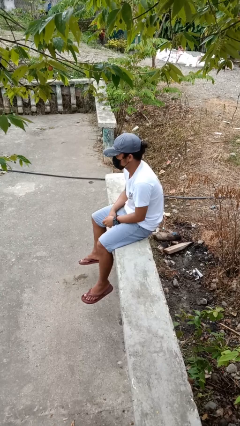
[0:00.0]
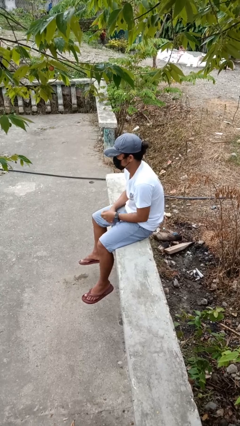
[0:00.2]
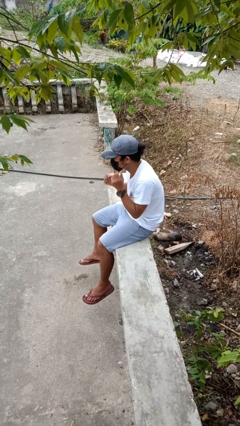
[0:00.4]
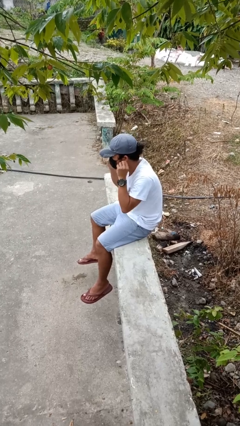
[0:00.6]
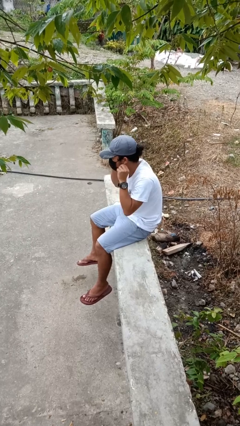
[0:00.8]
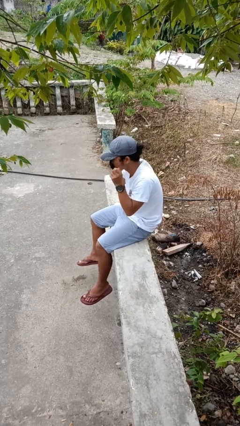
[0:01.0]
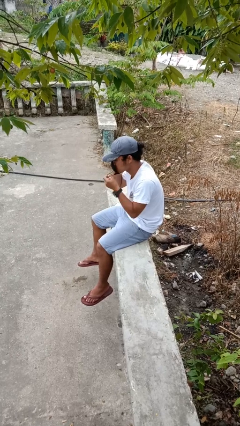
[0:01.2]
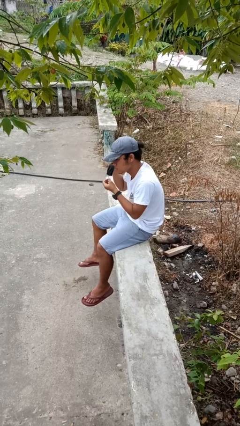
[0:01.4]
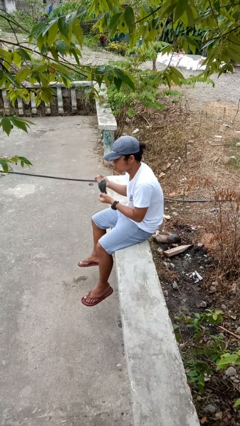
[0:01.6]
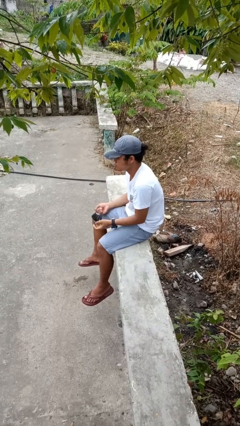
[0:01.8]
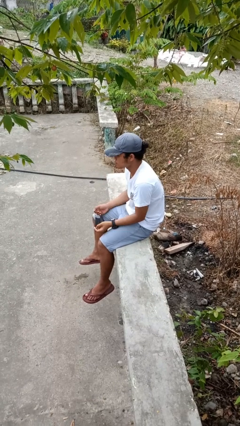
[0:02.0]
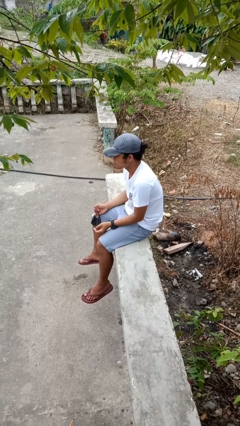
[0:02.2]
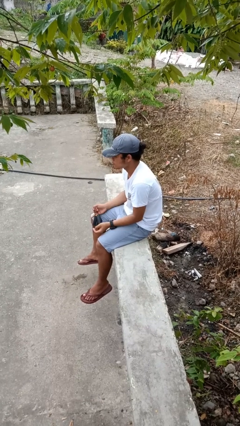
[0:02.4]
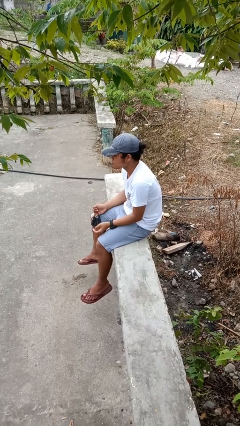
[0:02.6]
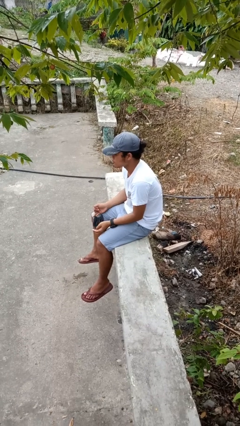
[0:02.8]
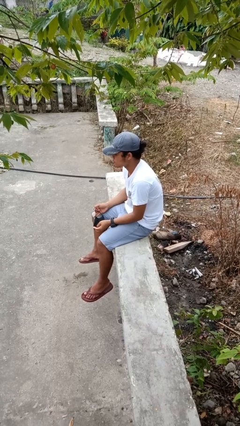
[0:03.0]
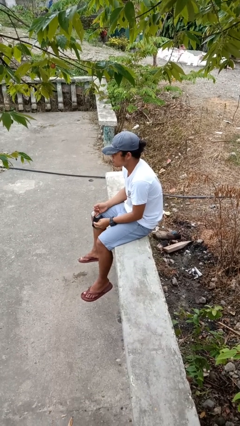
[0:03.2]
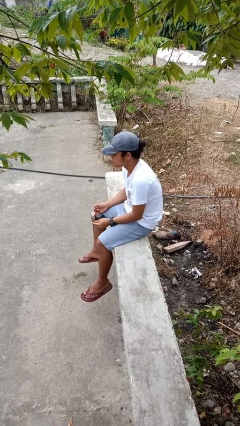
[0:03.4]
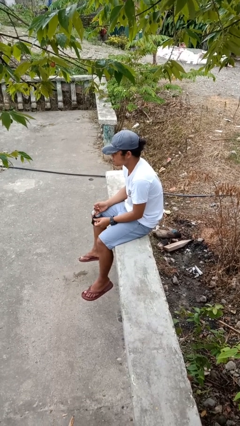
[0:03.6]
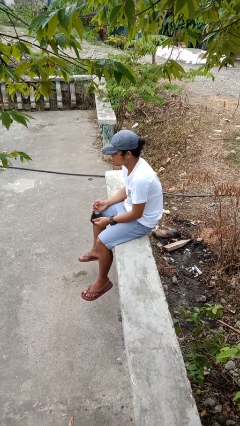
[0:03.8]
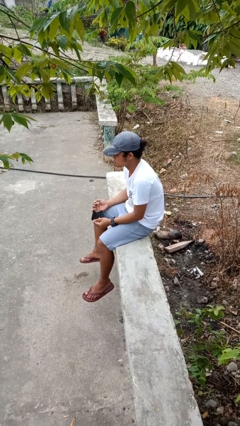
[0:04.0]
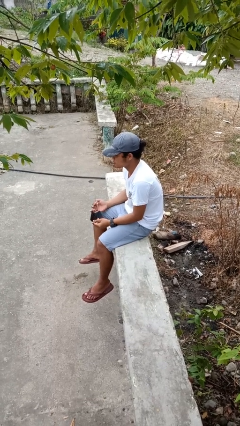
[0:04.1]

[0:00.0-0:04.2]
person takes off facemask

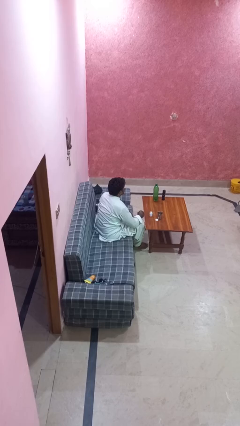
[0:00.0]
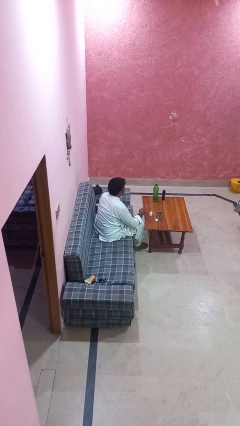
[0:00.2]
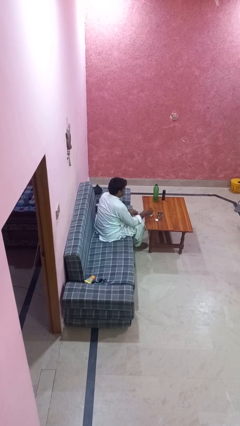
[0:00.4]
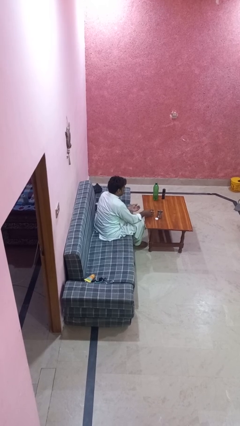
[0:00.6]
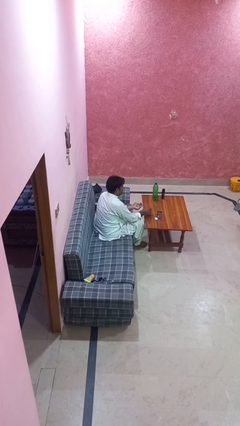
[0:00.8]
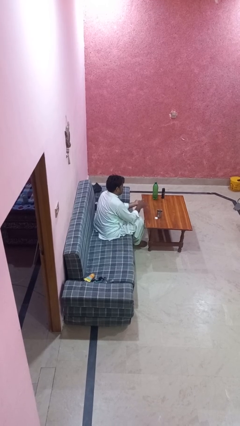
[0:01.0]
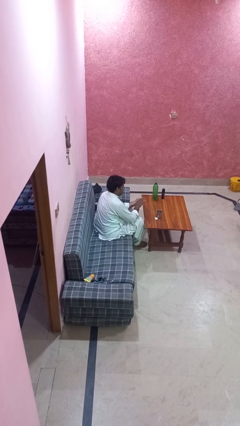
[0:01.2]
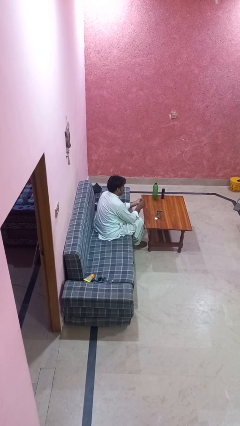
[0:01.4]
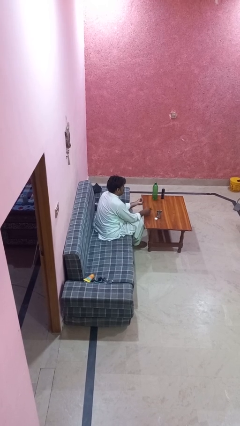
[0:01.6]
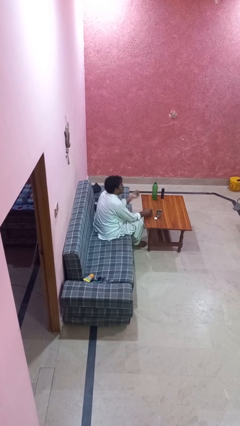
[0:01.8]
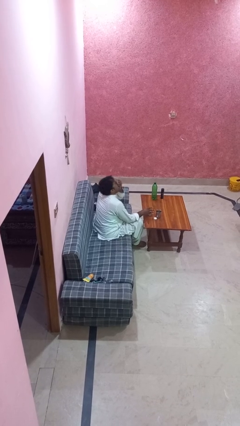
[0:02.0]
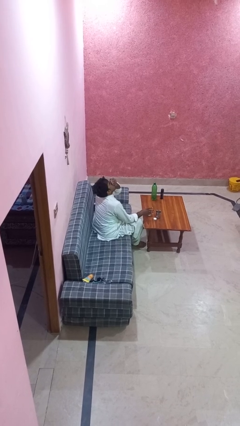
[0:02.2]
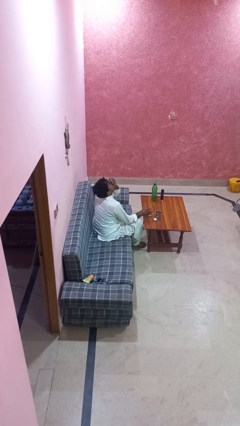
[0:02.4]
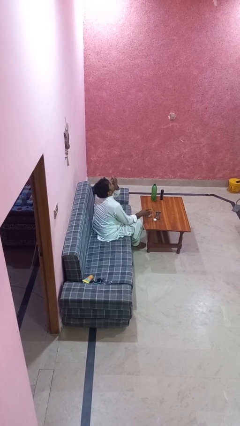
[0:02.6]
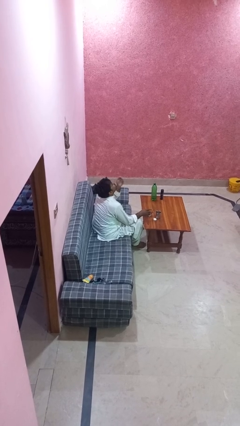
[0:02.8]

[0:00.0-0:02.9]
person takes medicine pills

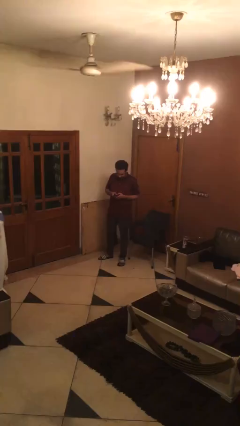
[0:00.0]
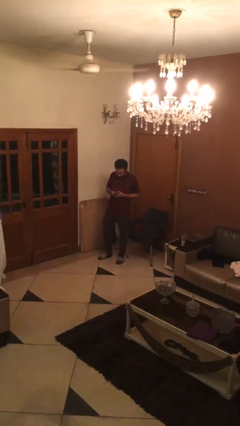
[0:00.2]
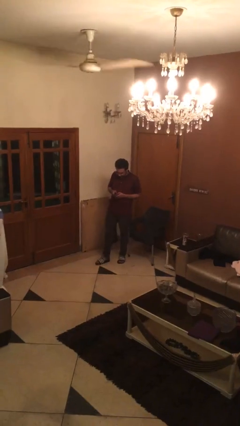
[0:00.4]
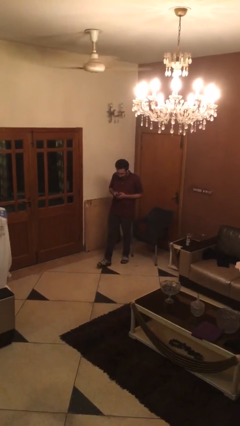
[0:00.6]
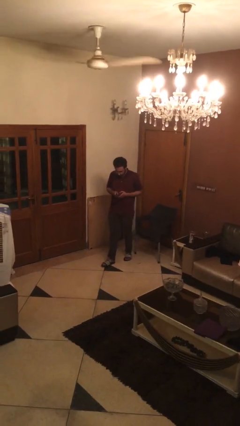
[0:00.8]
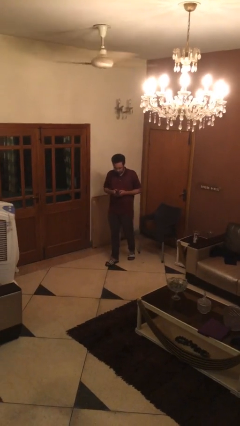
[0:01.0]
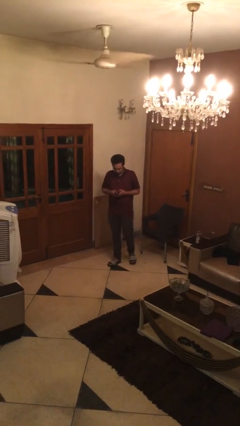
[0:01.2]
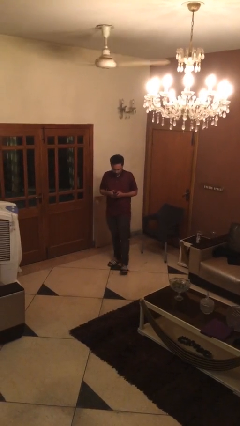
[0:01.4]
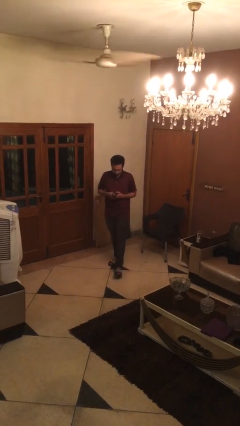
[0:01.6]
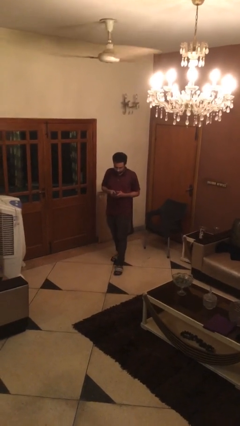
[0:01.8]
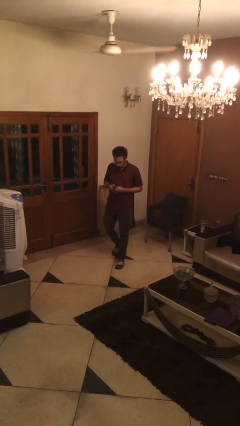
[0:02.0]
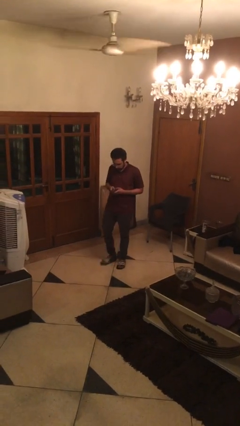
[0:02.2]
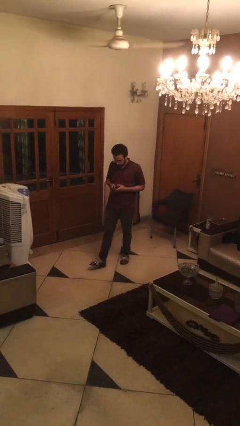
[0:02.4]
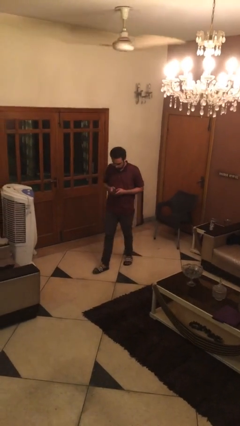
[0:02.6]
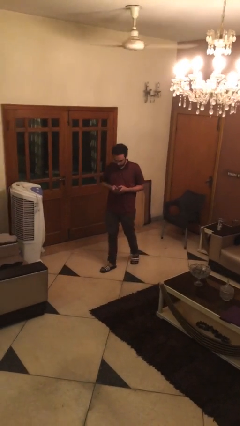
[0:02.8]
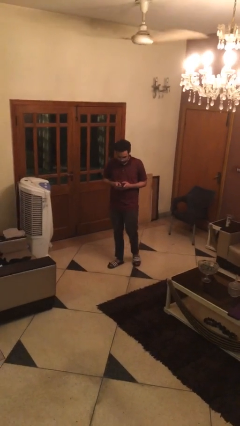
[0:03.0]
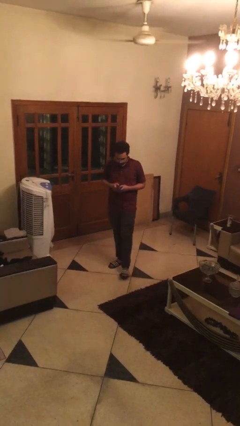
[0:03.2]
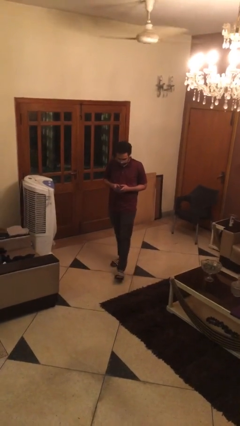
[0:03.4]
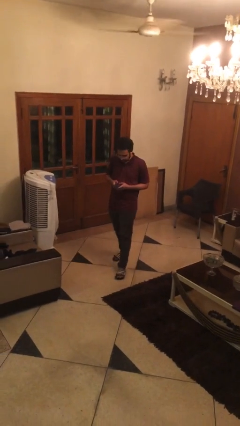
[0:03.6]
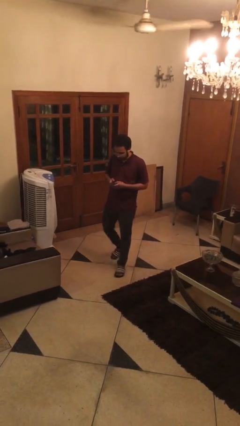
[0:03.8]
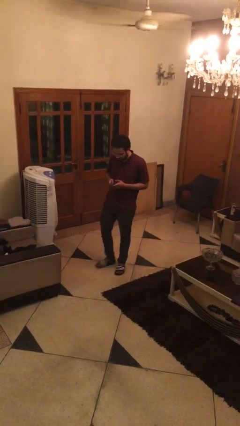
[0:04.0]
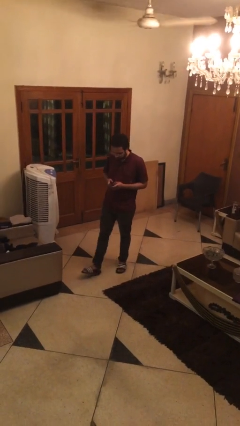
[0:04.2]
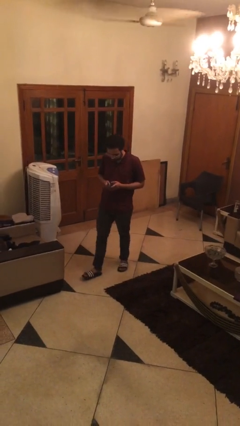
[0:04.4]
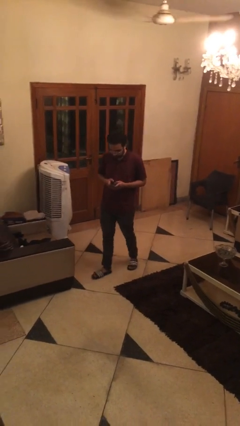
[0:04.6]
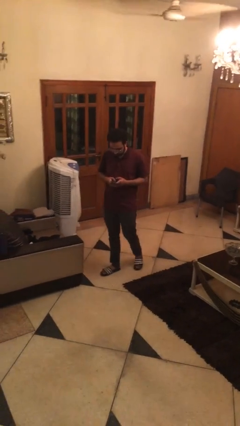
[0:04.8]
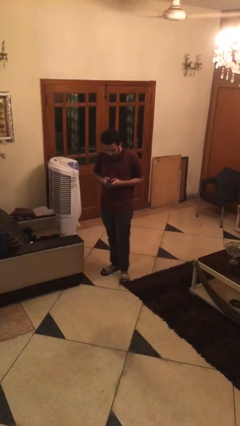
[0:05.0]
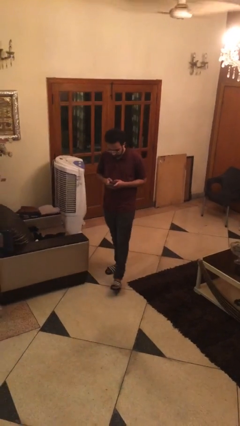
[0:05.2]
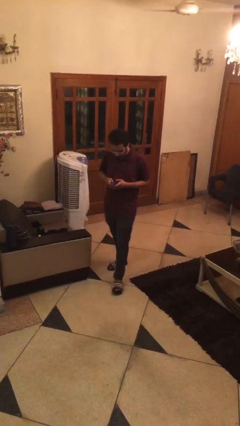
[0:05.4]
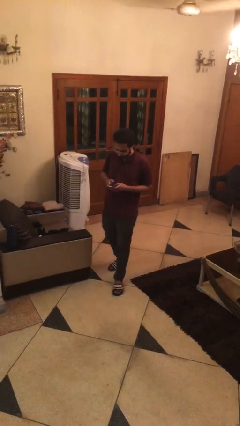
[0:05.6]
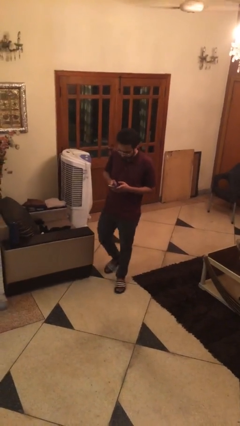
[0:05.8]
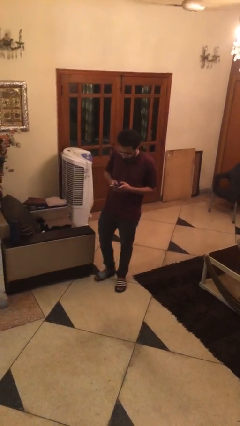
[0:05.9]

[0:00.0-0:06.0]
person texts on phone

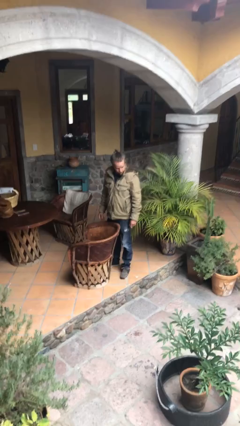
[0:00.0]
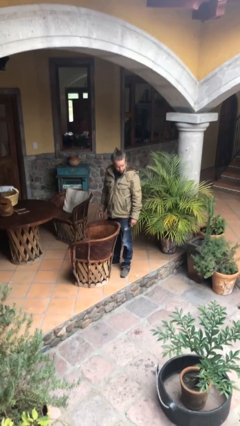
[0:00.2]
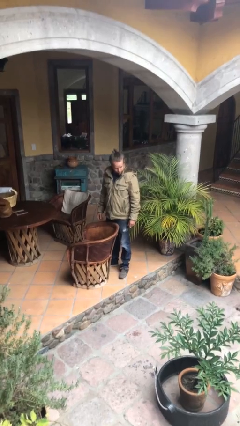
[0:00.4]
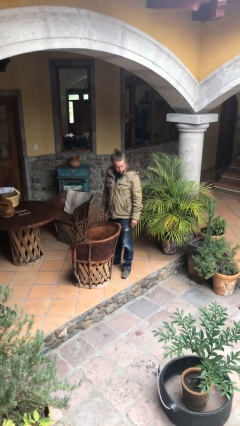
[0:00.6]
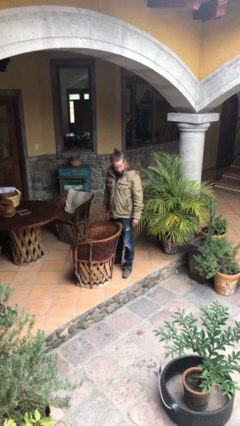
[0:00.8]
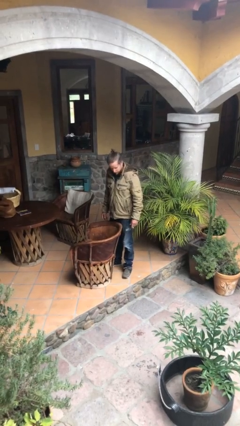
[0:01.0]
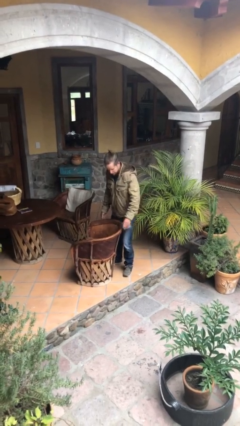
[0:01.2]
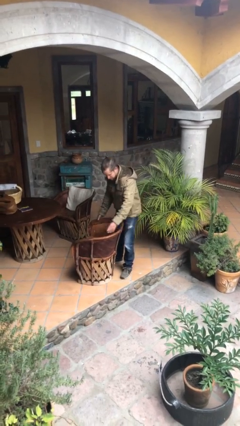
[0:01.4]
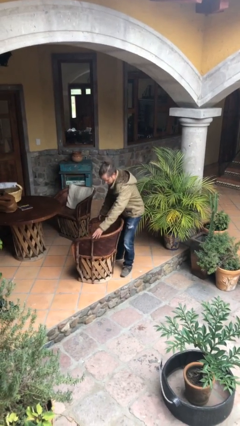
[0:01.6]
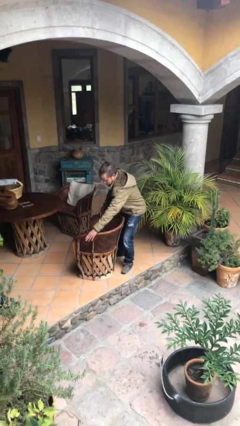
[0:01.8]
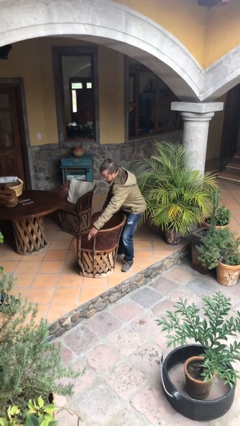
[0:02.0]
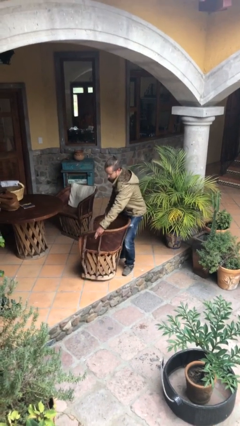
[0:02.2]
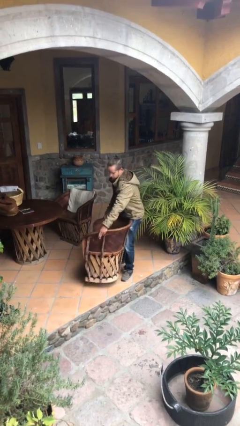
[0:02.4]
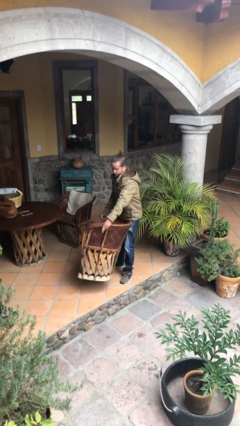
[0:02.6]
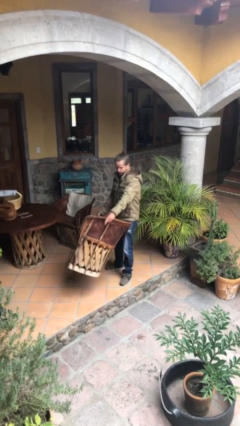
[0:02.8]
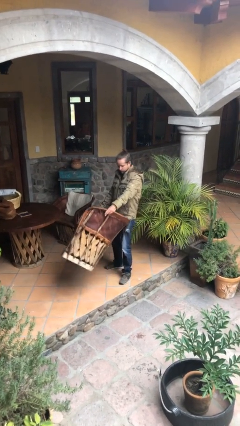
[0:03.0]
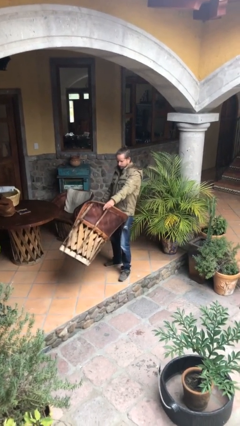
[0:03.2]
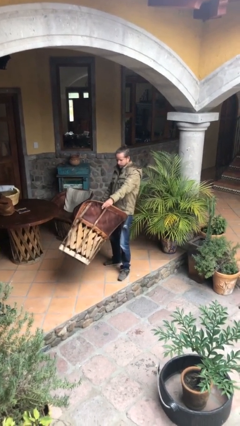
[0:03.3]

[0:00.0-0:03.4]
person picks up object from floor

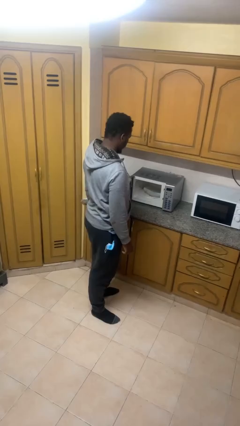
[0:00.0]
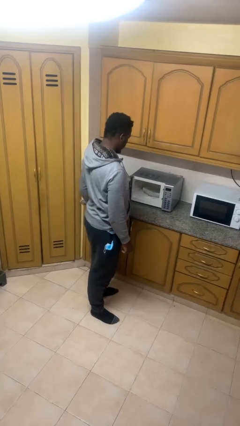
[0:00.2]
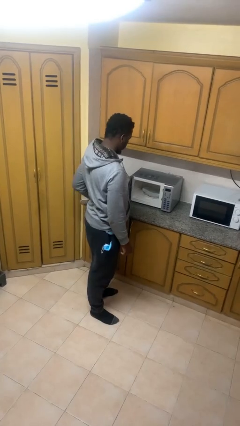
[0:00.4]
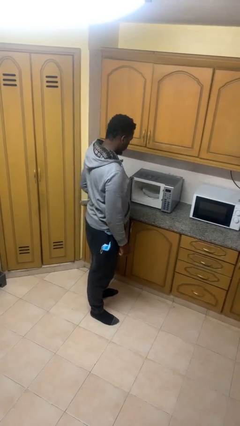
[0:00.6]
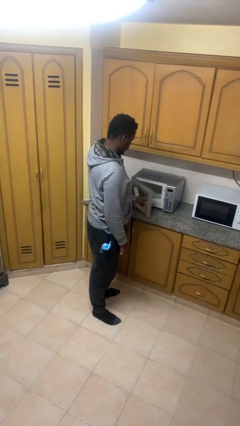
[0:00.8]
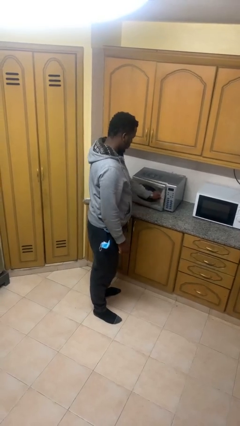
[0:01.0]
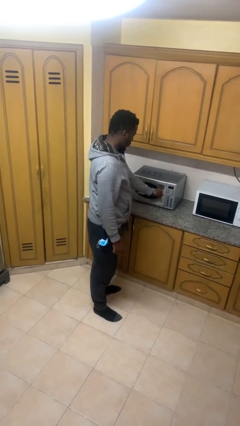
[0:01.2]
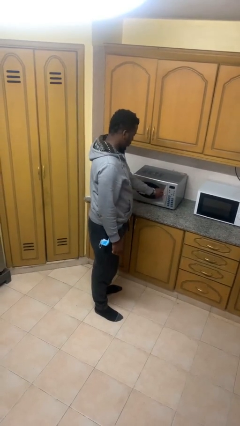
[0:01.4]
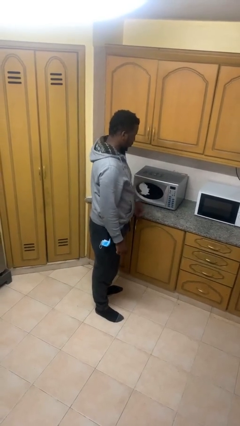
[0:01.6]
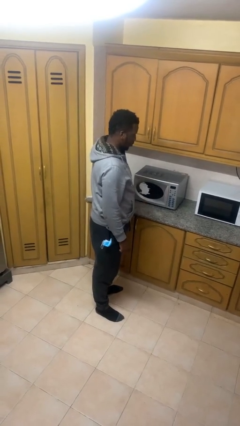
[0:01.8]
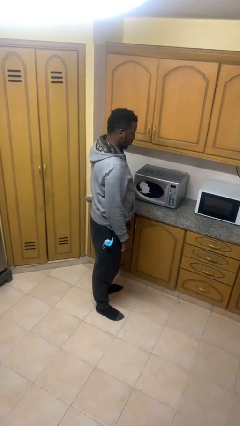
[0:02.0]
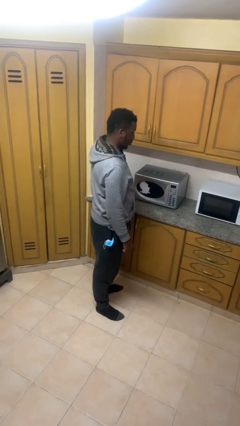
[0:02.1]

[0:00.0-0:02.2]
person closes microwave
